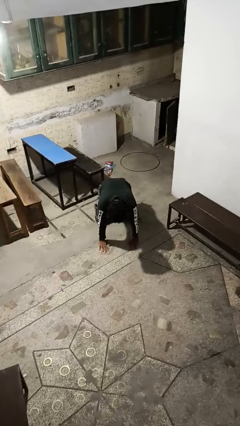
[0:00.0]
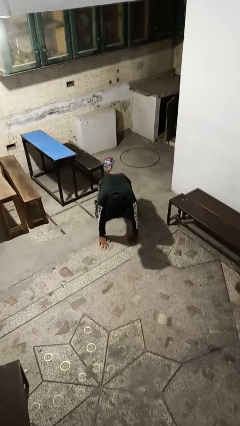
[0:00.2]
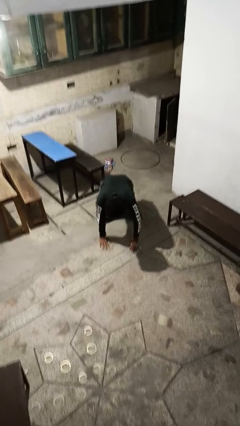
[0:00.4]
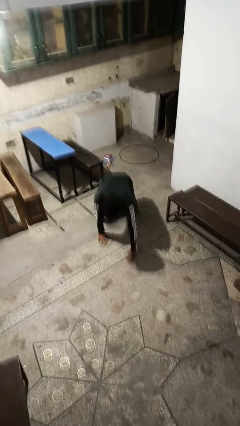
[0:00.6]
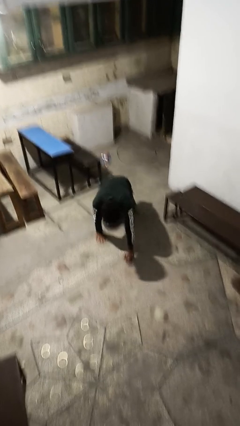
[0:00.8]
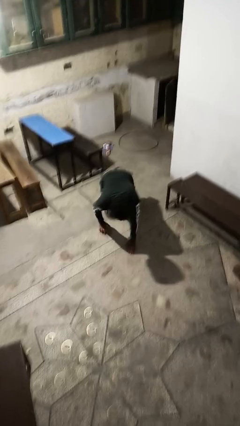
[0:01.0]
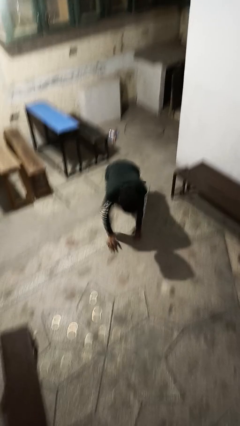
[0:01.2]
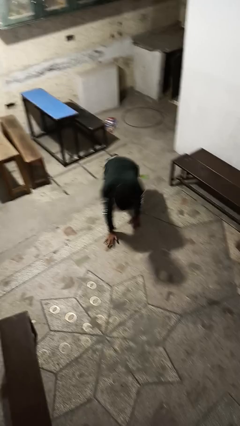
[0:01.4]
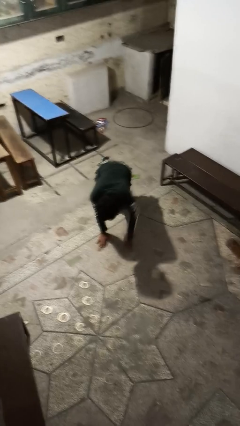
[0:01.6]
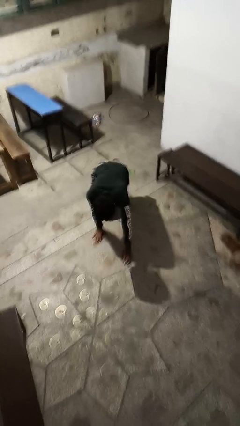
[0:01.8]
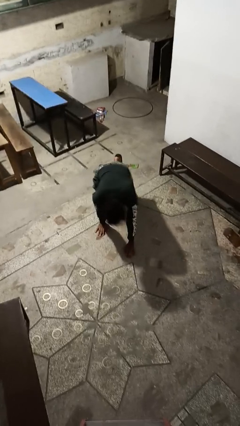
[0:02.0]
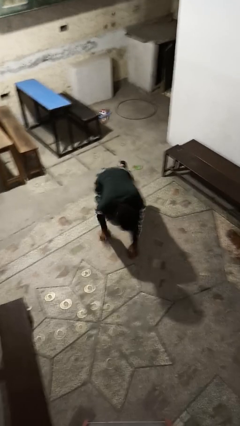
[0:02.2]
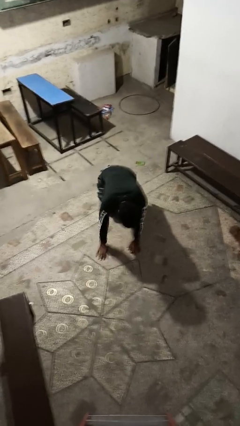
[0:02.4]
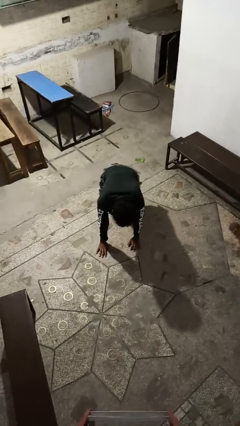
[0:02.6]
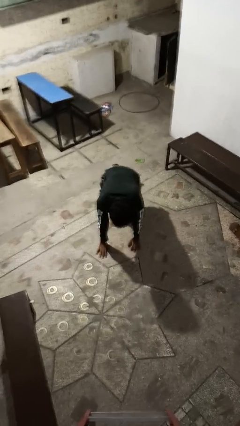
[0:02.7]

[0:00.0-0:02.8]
person crawls

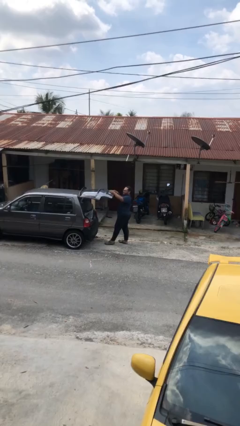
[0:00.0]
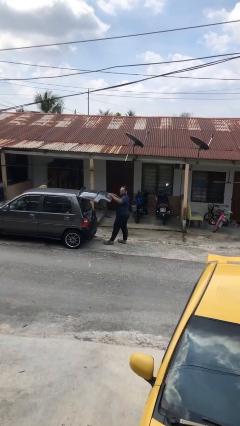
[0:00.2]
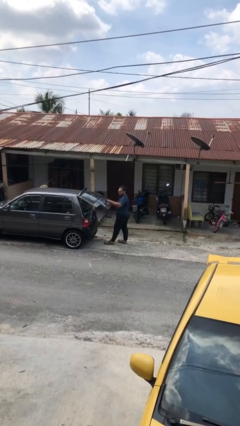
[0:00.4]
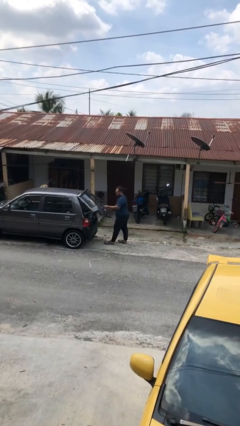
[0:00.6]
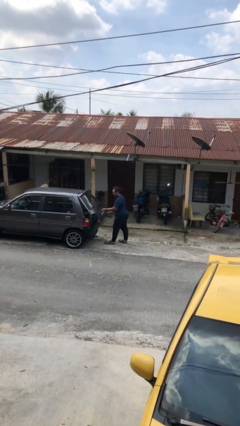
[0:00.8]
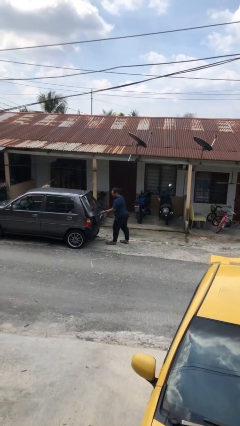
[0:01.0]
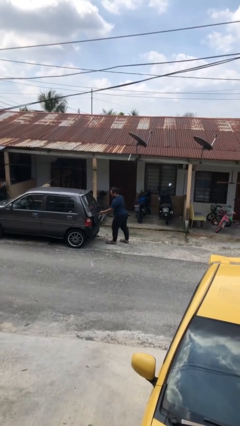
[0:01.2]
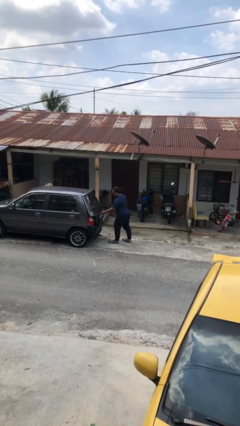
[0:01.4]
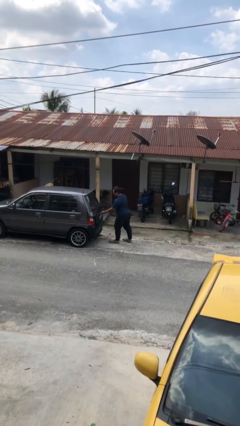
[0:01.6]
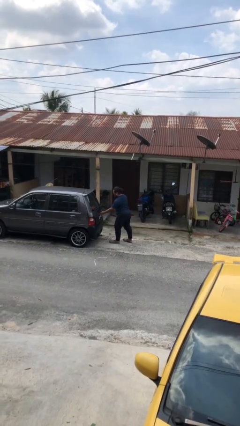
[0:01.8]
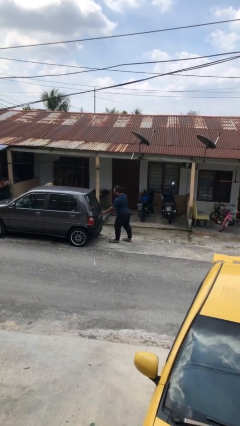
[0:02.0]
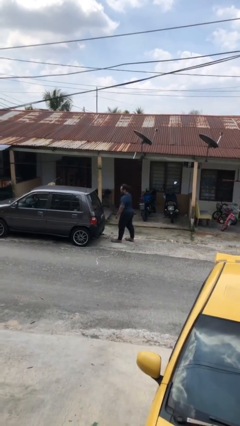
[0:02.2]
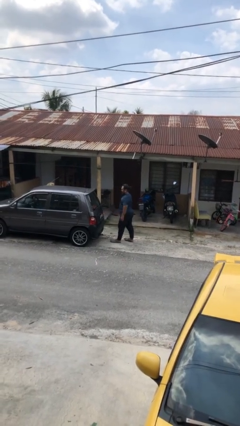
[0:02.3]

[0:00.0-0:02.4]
person closes car trunk

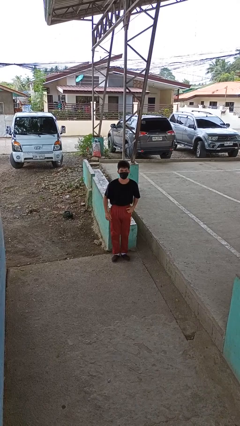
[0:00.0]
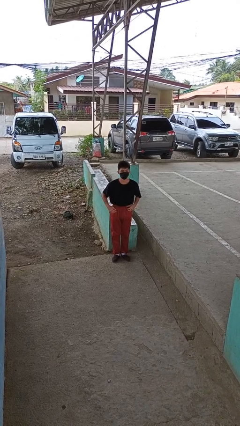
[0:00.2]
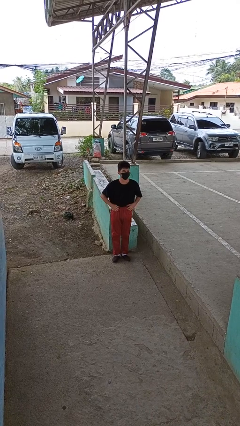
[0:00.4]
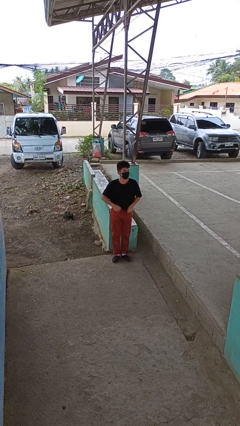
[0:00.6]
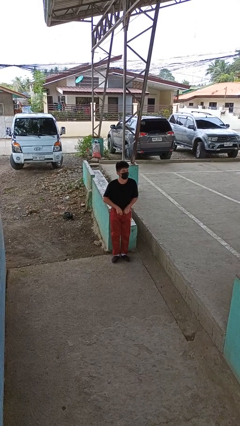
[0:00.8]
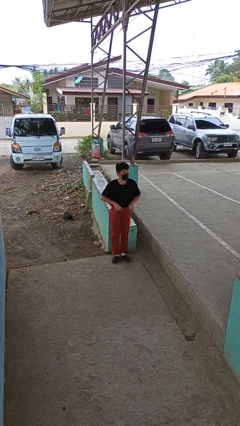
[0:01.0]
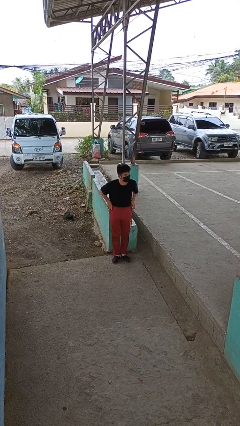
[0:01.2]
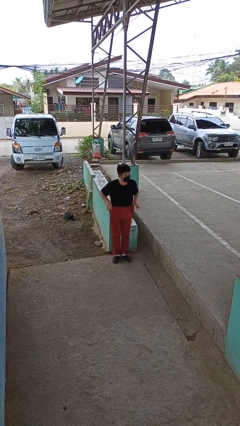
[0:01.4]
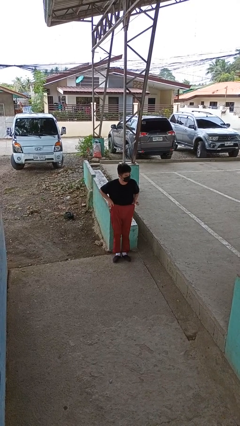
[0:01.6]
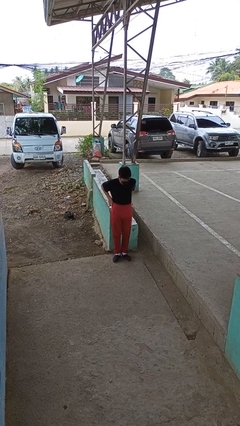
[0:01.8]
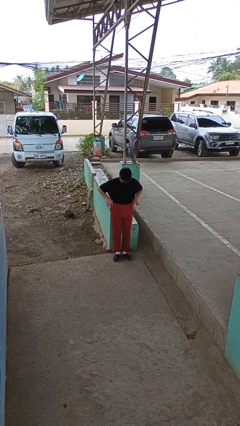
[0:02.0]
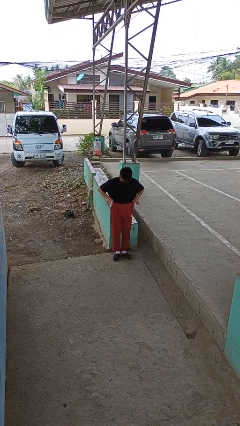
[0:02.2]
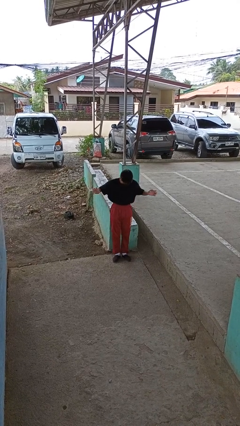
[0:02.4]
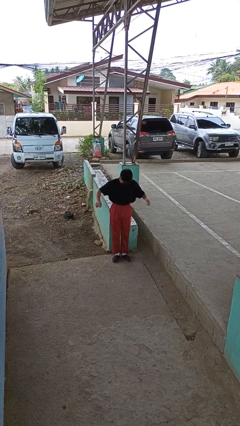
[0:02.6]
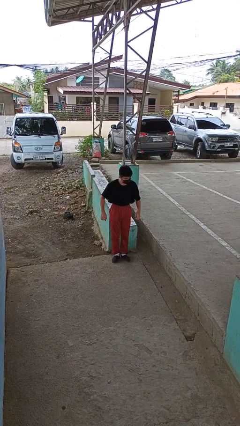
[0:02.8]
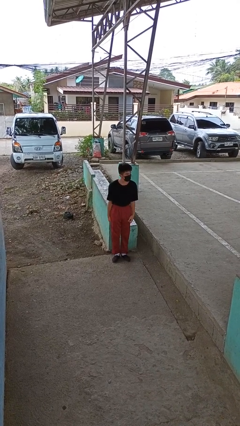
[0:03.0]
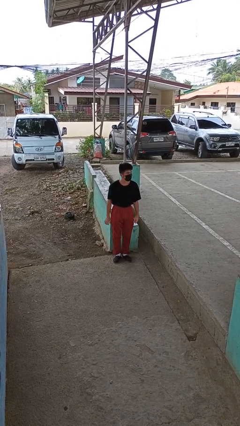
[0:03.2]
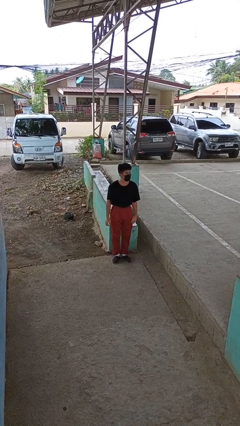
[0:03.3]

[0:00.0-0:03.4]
person hikes up pants

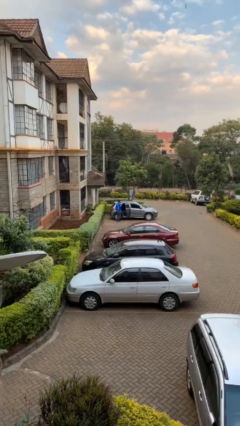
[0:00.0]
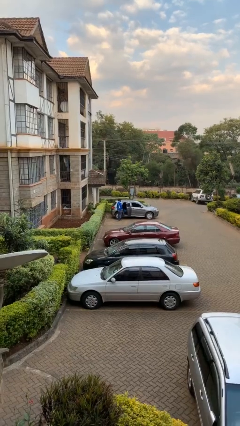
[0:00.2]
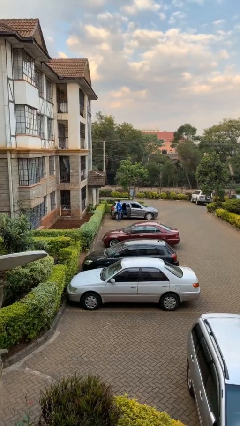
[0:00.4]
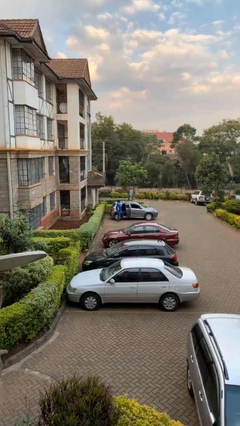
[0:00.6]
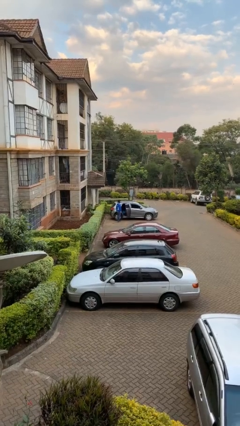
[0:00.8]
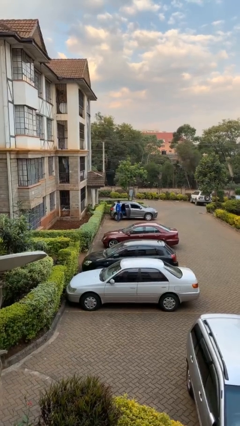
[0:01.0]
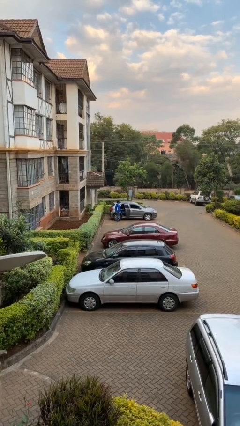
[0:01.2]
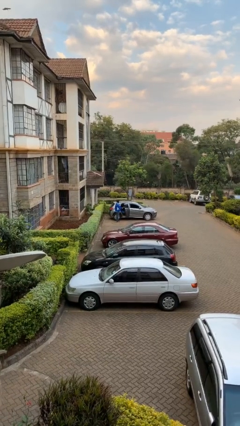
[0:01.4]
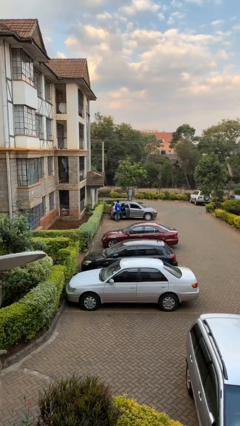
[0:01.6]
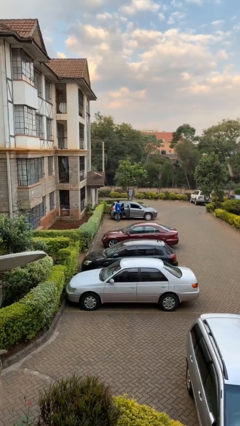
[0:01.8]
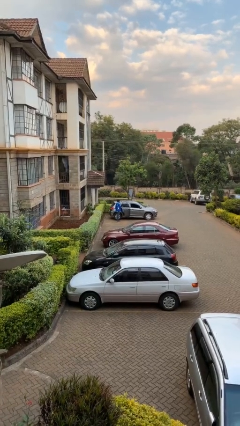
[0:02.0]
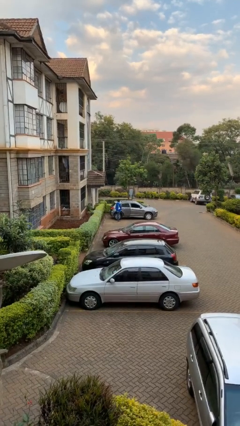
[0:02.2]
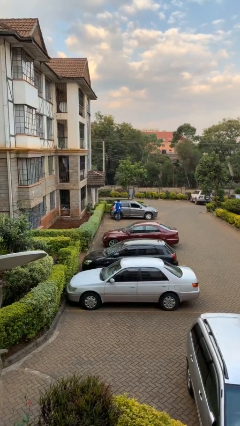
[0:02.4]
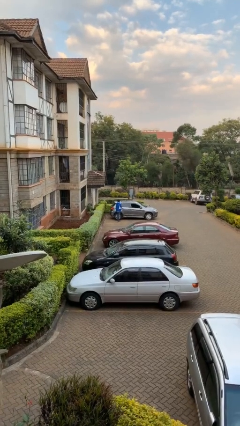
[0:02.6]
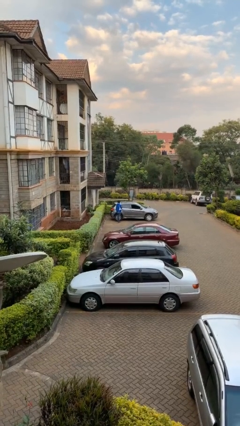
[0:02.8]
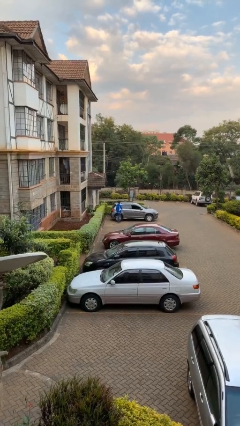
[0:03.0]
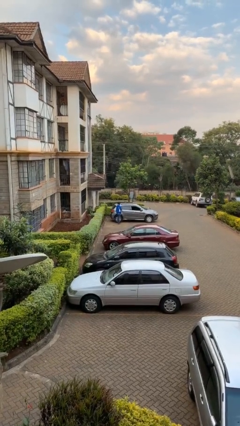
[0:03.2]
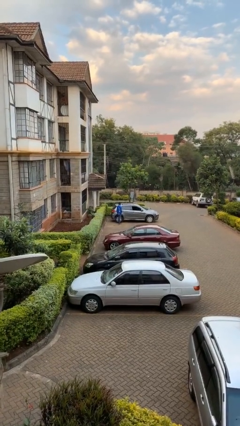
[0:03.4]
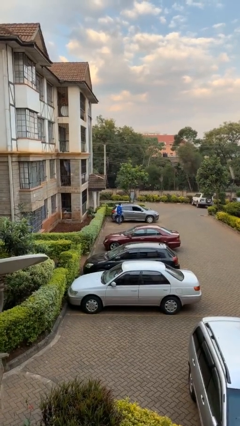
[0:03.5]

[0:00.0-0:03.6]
person closes car door

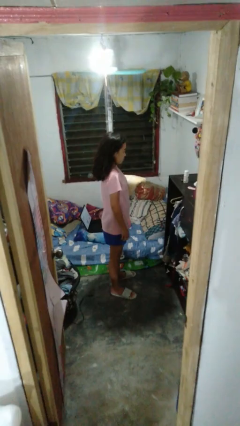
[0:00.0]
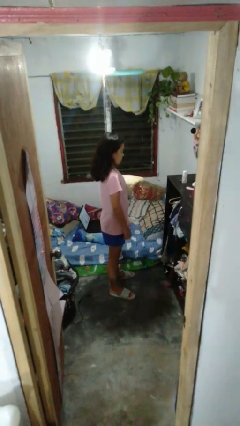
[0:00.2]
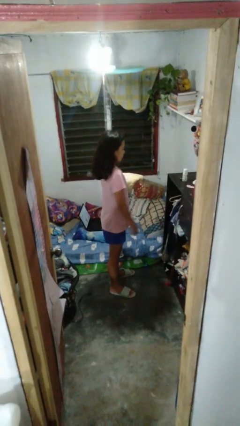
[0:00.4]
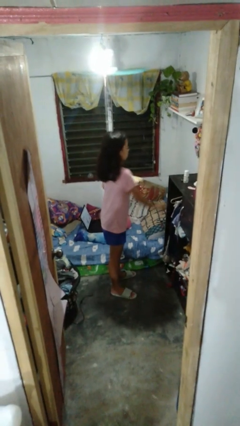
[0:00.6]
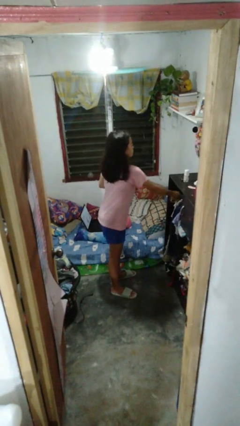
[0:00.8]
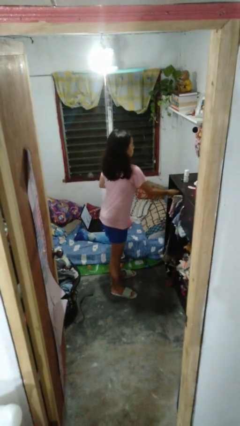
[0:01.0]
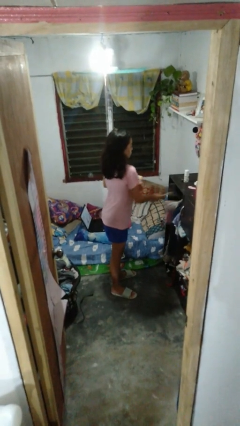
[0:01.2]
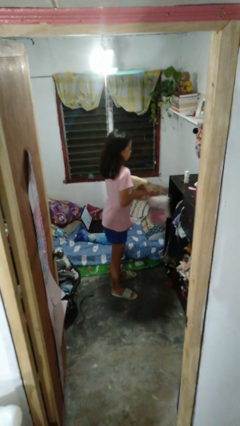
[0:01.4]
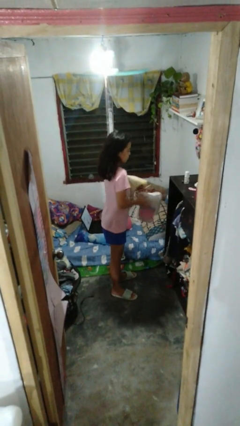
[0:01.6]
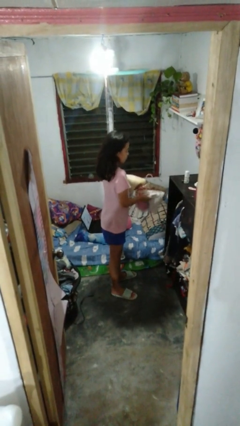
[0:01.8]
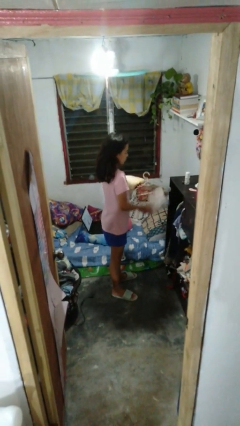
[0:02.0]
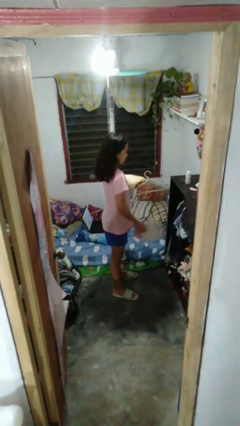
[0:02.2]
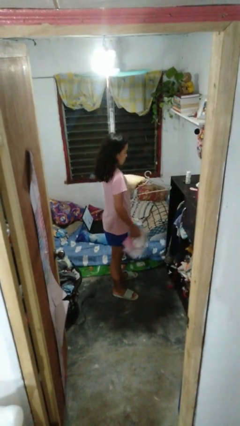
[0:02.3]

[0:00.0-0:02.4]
person takes clothes from closet

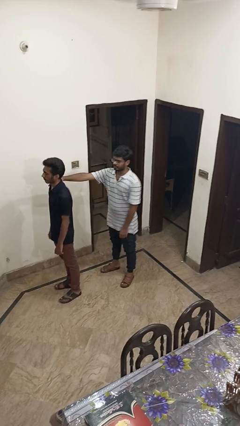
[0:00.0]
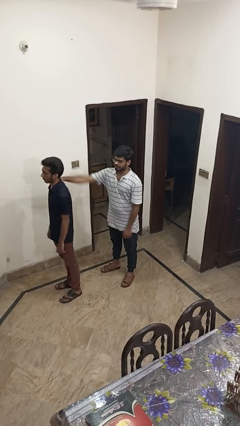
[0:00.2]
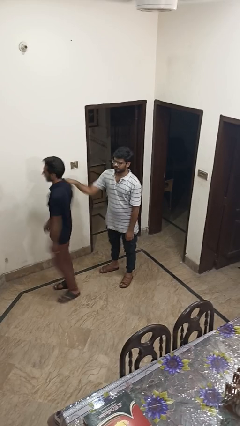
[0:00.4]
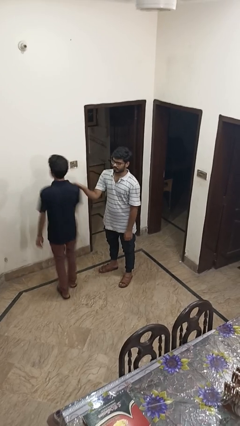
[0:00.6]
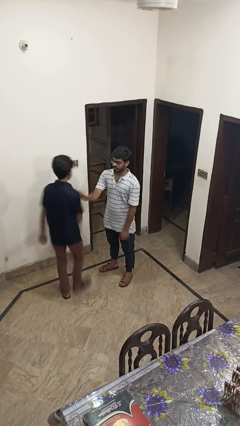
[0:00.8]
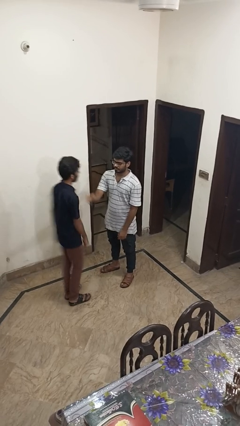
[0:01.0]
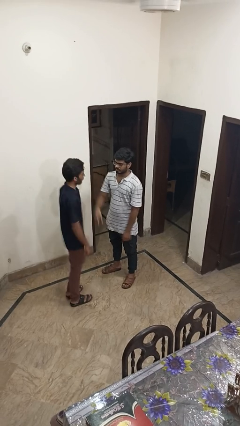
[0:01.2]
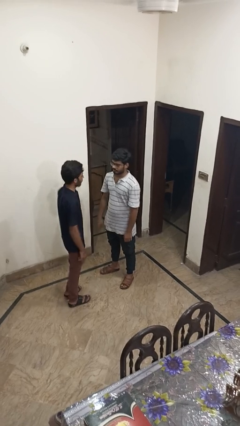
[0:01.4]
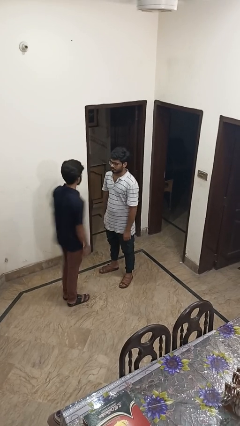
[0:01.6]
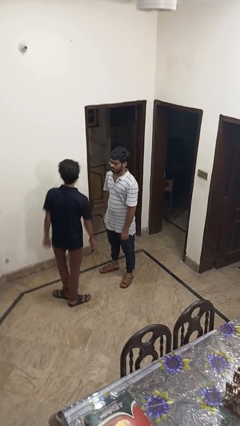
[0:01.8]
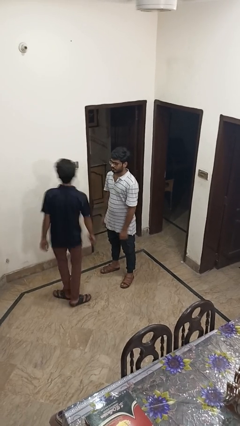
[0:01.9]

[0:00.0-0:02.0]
person spins person around

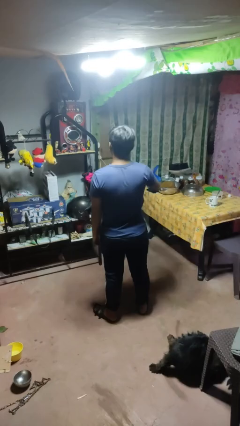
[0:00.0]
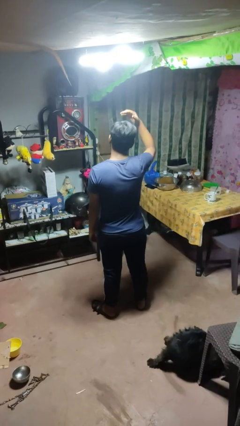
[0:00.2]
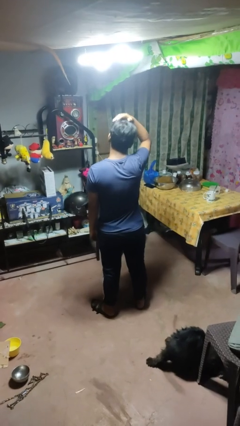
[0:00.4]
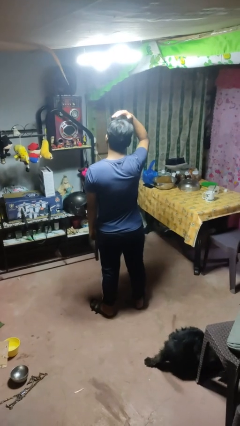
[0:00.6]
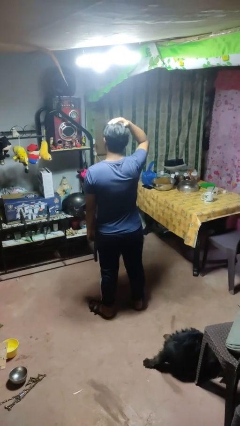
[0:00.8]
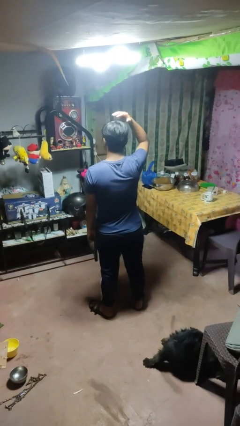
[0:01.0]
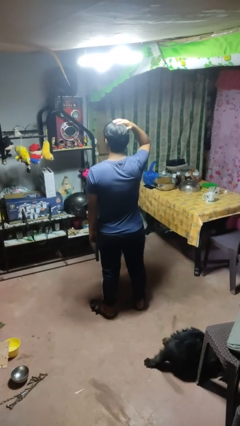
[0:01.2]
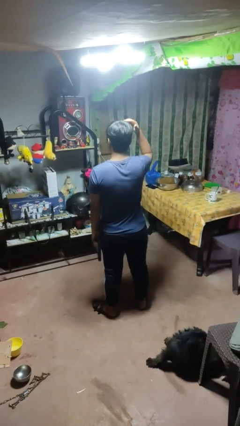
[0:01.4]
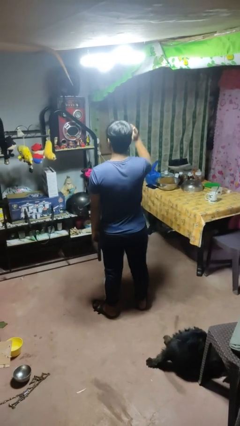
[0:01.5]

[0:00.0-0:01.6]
person pats head
